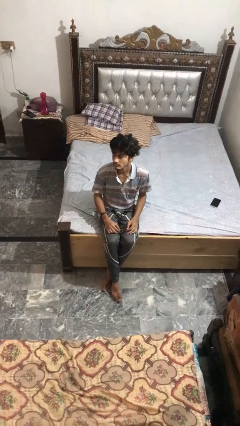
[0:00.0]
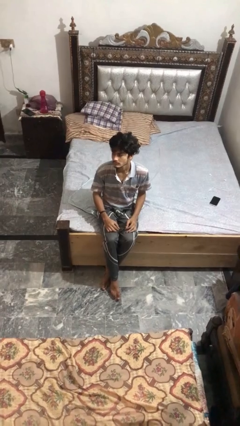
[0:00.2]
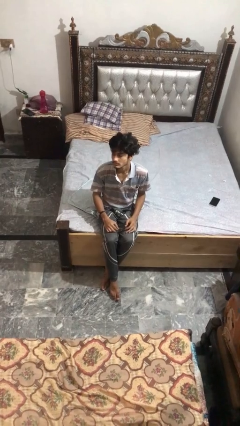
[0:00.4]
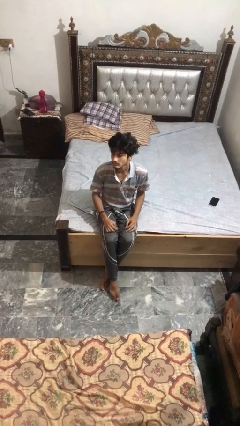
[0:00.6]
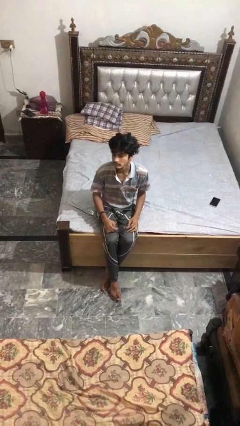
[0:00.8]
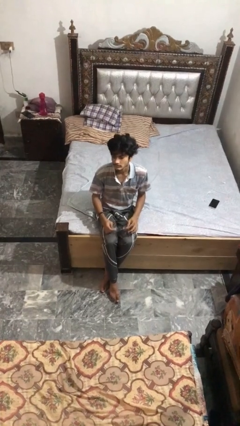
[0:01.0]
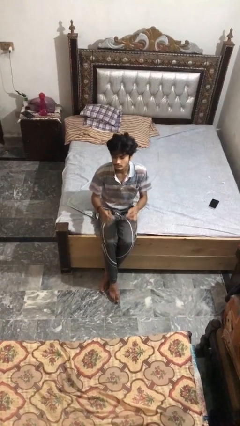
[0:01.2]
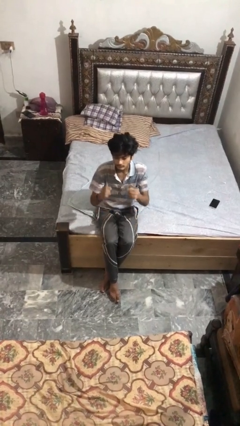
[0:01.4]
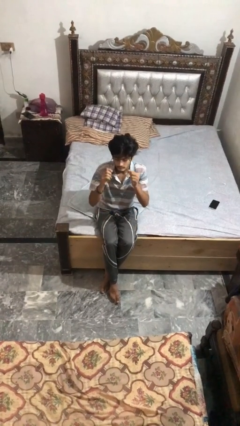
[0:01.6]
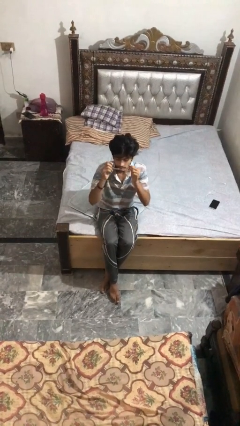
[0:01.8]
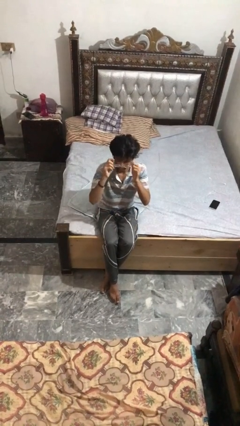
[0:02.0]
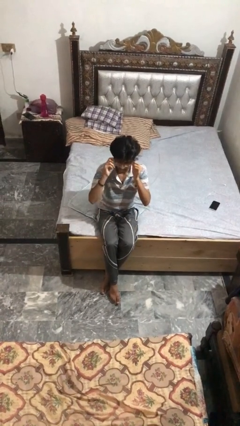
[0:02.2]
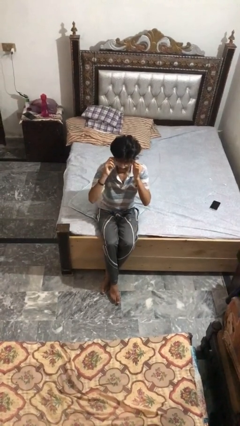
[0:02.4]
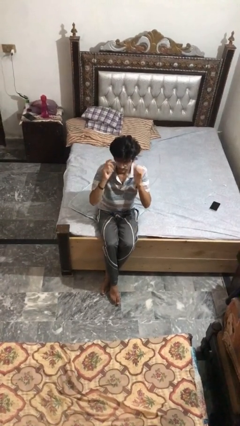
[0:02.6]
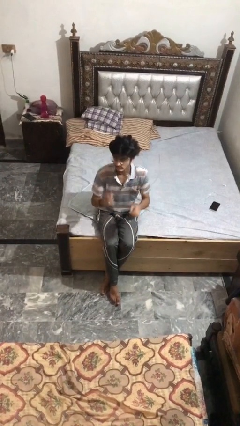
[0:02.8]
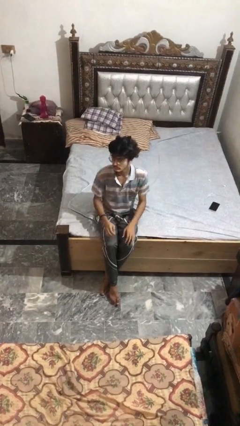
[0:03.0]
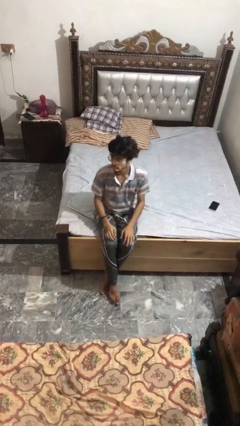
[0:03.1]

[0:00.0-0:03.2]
person puts on glasses

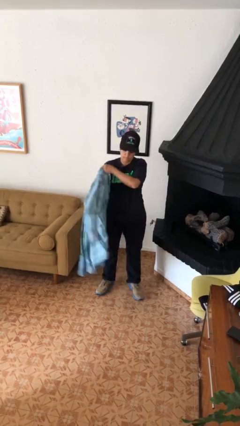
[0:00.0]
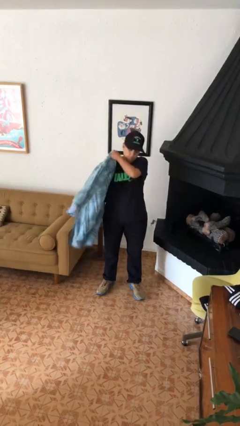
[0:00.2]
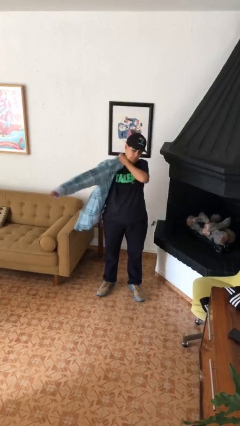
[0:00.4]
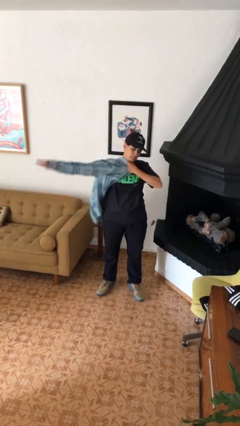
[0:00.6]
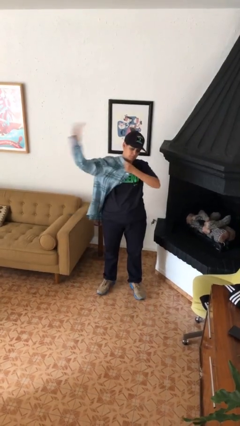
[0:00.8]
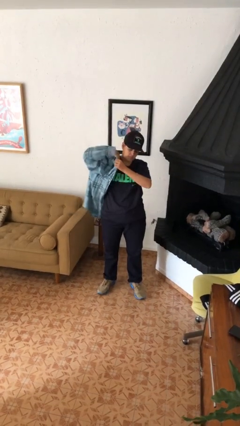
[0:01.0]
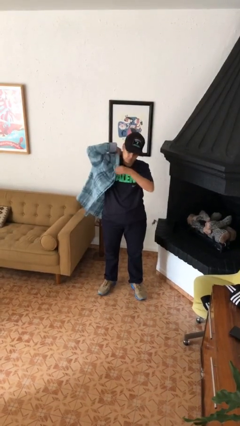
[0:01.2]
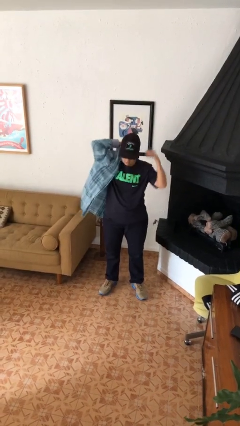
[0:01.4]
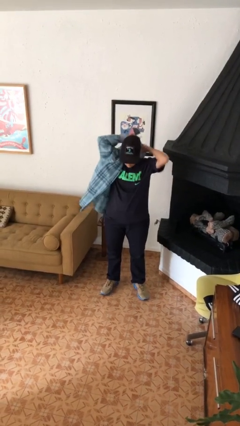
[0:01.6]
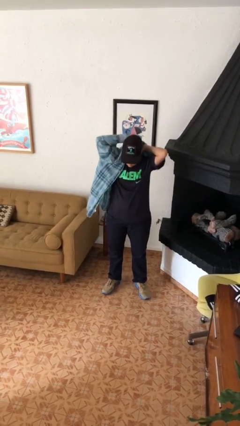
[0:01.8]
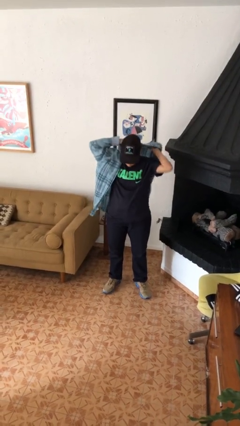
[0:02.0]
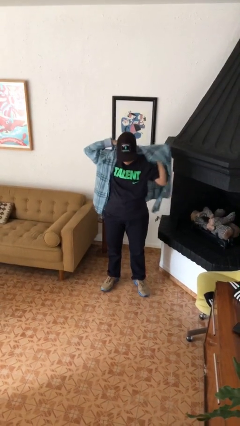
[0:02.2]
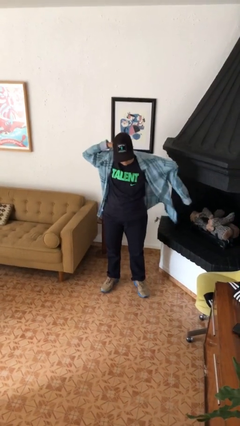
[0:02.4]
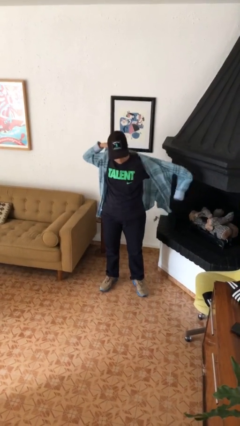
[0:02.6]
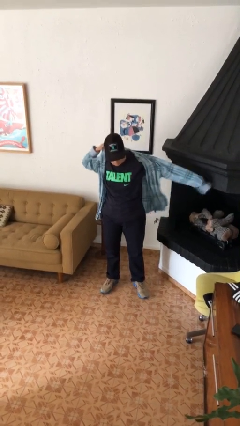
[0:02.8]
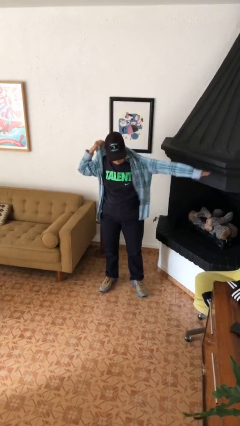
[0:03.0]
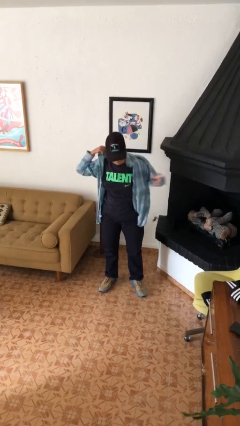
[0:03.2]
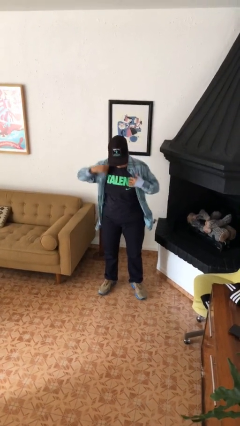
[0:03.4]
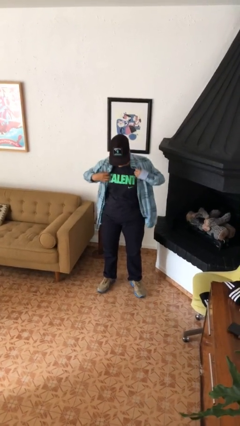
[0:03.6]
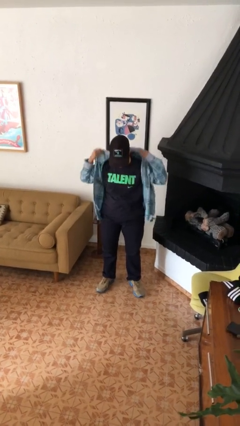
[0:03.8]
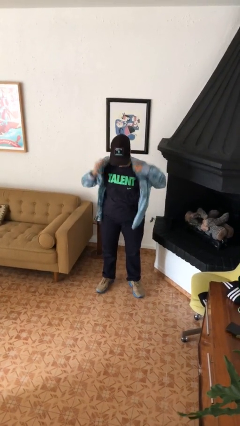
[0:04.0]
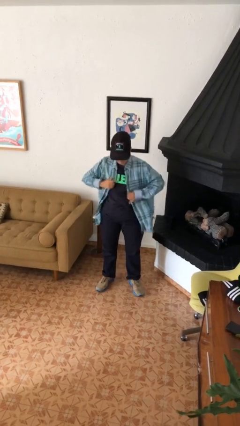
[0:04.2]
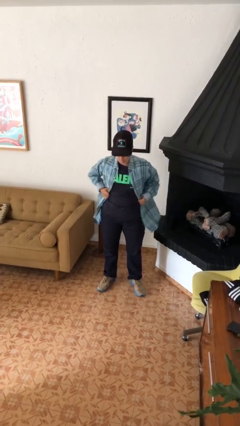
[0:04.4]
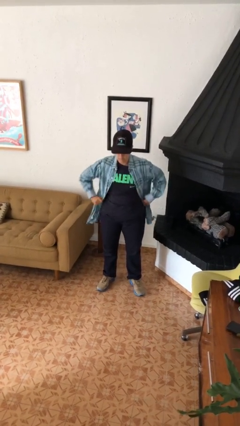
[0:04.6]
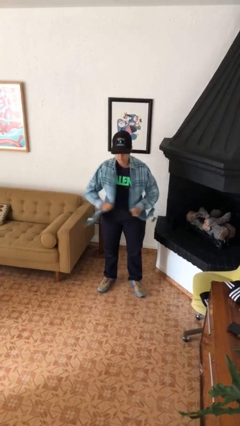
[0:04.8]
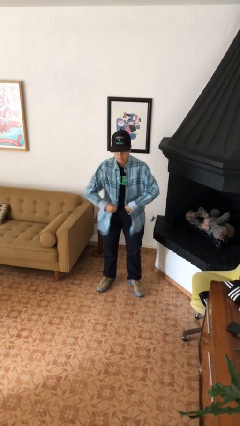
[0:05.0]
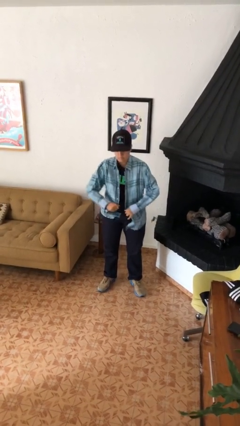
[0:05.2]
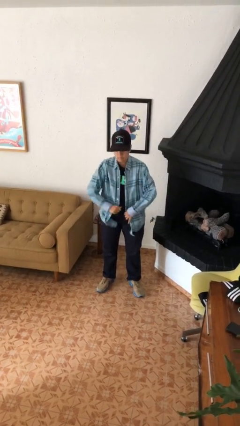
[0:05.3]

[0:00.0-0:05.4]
person puts on shirt

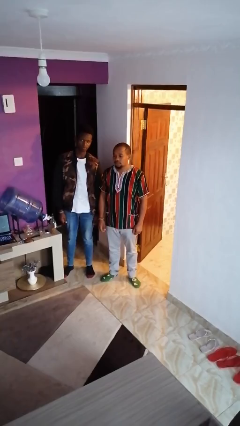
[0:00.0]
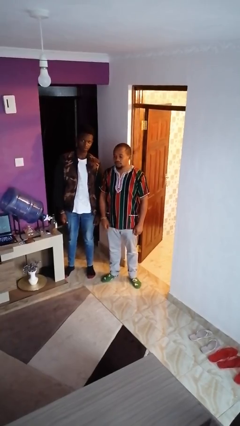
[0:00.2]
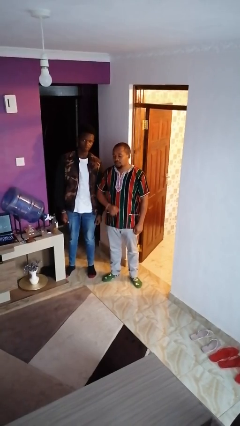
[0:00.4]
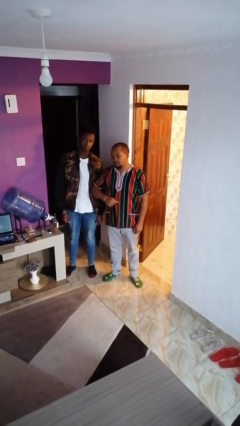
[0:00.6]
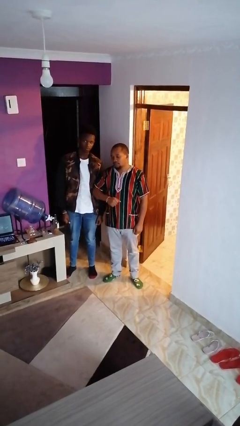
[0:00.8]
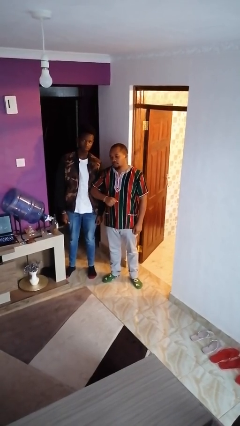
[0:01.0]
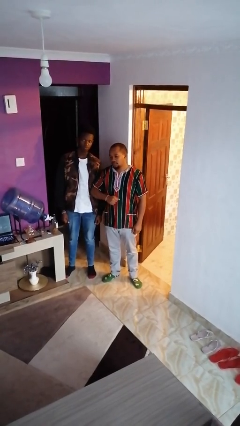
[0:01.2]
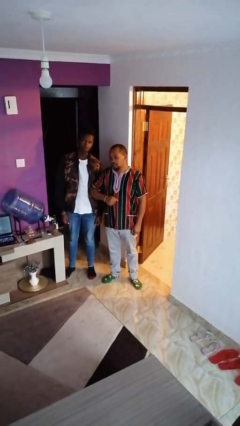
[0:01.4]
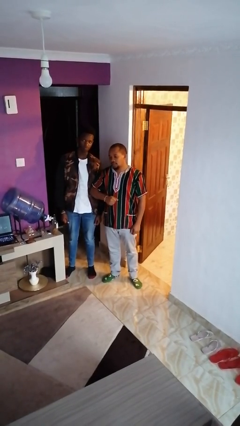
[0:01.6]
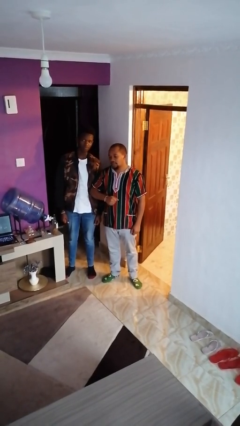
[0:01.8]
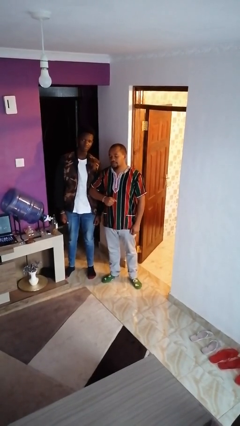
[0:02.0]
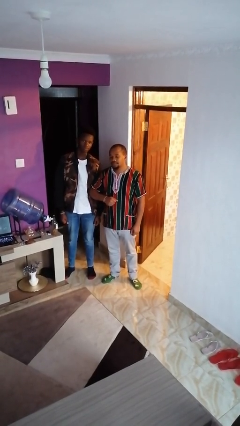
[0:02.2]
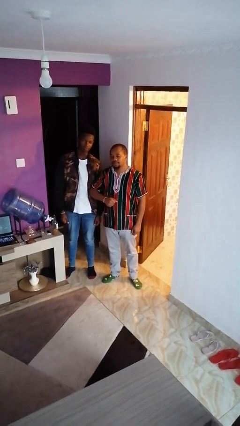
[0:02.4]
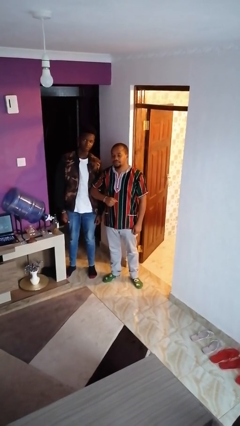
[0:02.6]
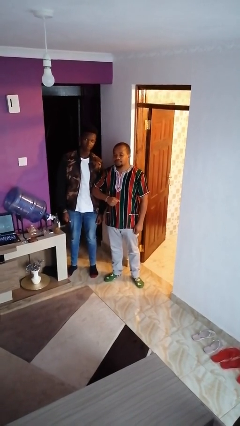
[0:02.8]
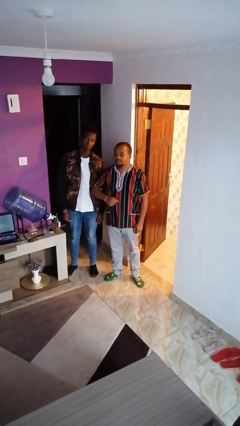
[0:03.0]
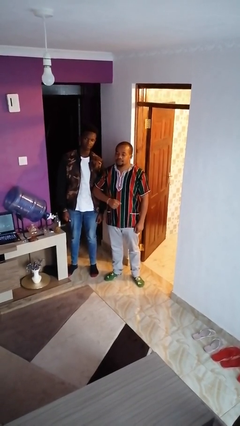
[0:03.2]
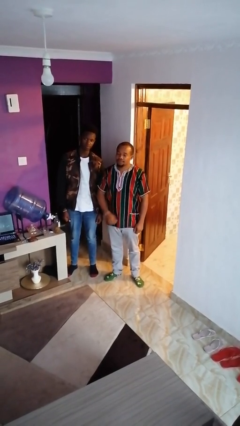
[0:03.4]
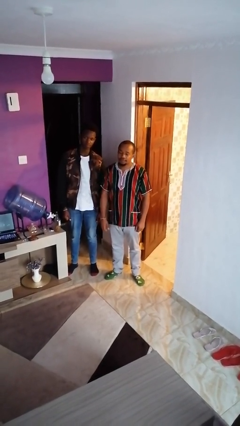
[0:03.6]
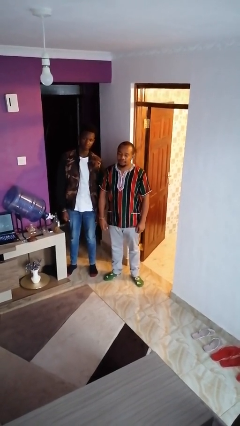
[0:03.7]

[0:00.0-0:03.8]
person nudges person with elbow

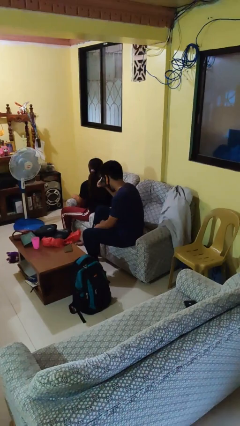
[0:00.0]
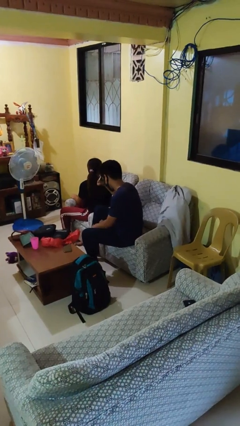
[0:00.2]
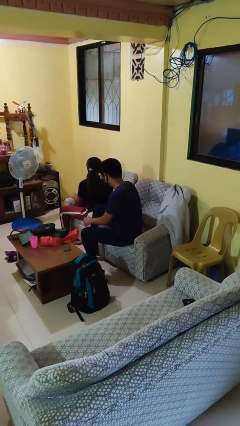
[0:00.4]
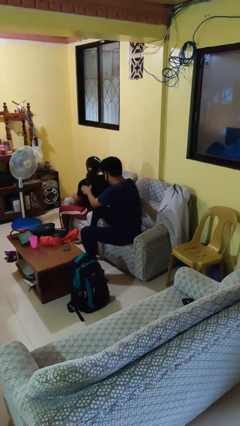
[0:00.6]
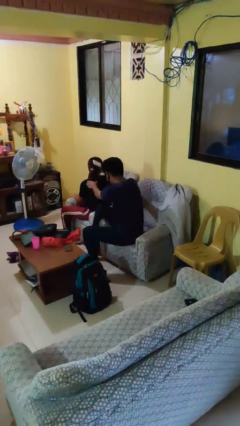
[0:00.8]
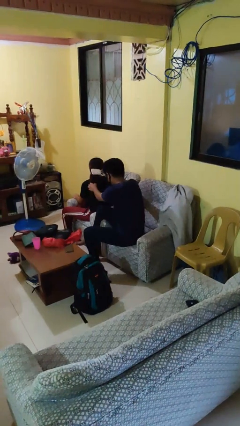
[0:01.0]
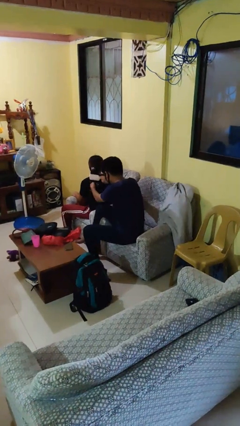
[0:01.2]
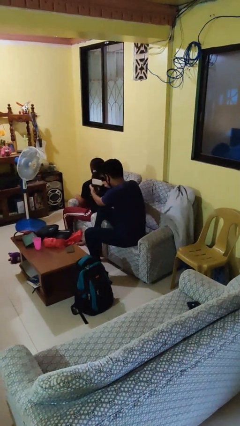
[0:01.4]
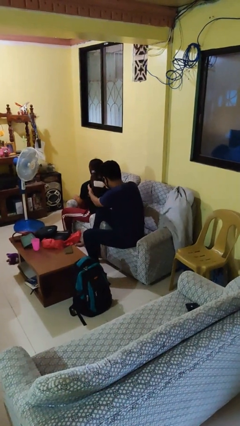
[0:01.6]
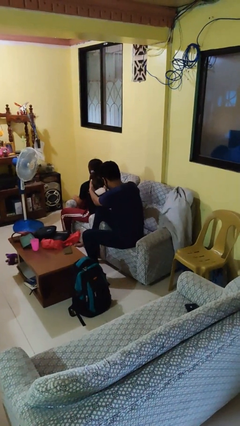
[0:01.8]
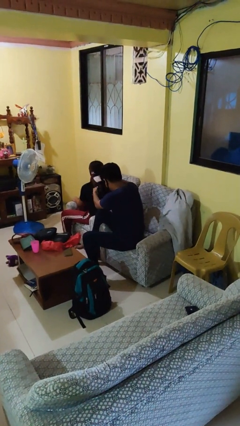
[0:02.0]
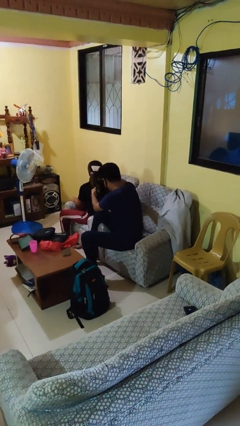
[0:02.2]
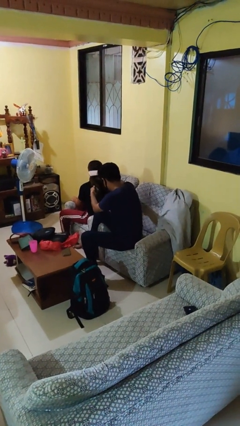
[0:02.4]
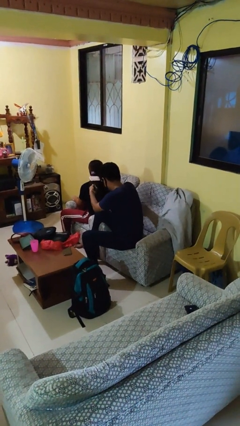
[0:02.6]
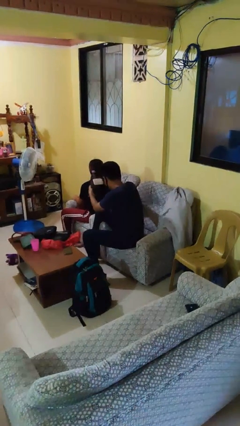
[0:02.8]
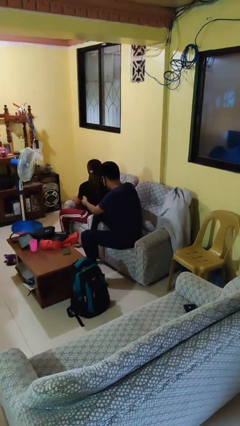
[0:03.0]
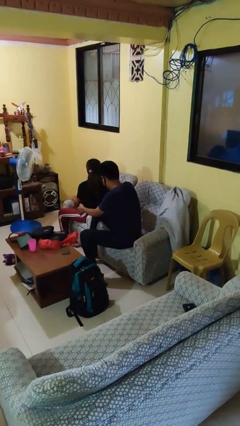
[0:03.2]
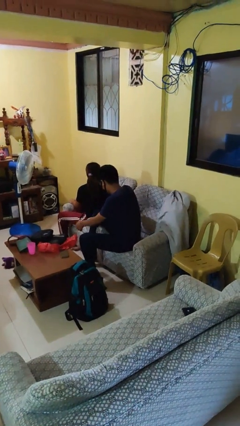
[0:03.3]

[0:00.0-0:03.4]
person brushes hair of person

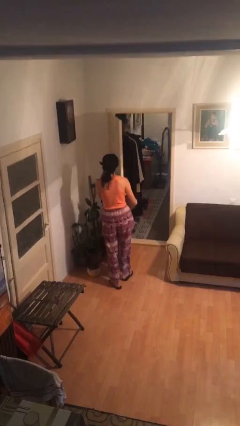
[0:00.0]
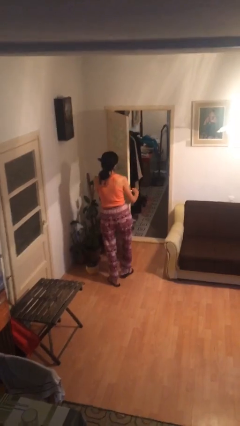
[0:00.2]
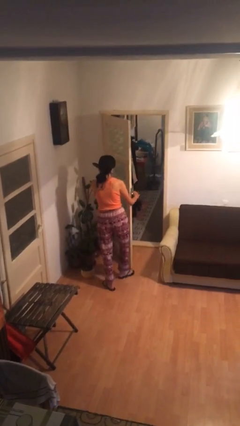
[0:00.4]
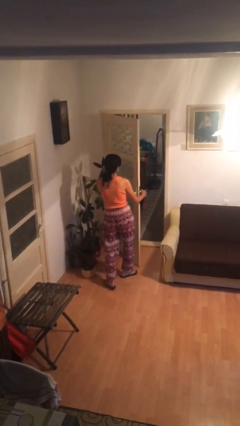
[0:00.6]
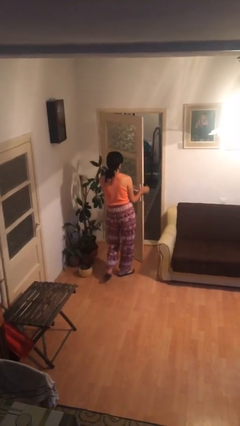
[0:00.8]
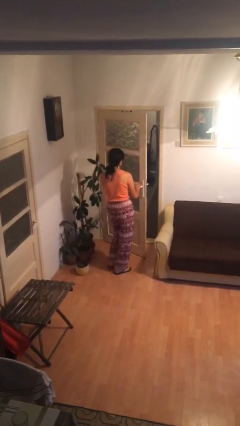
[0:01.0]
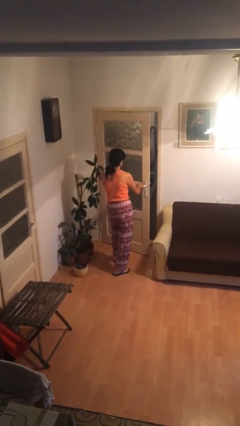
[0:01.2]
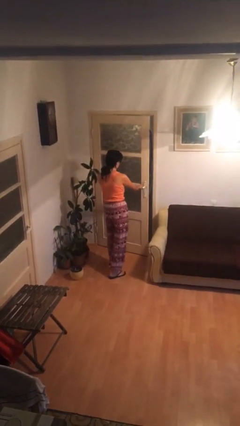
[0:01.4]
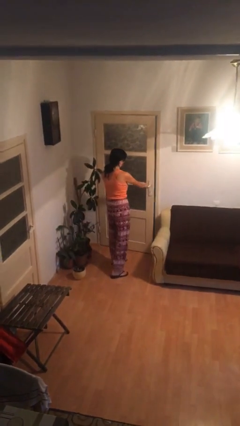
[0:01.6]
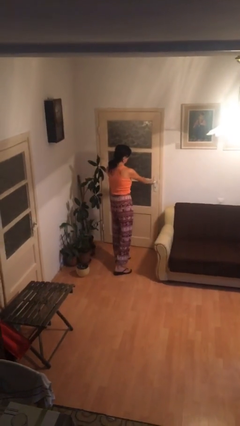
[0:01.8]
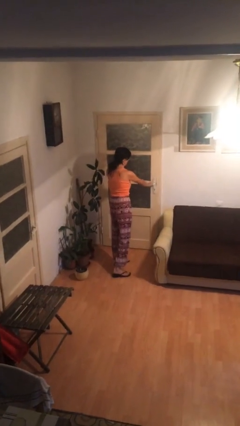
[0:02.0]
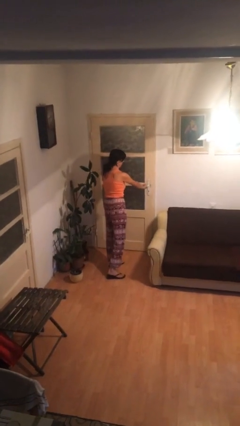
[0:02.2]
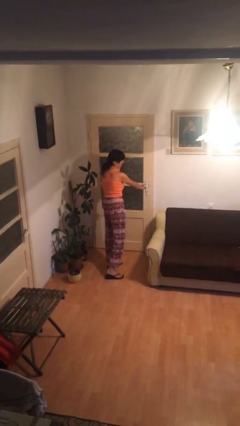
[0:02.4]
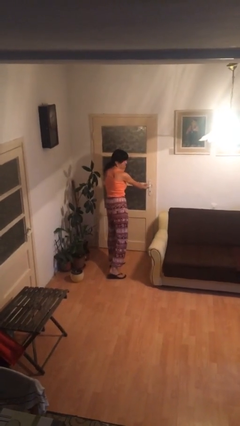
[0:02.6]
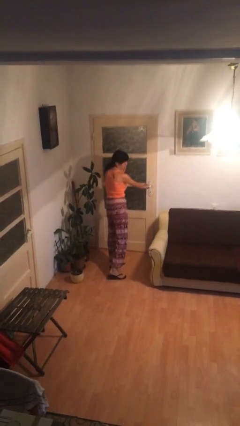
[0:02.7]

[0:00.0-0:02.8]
person closes facility door
